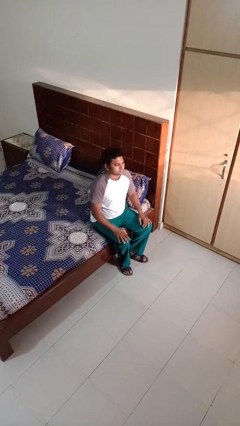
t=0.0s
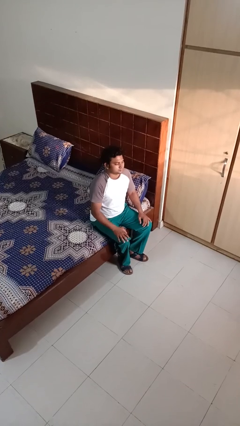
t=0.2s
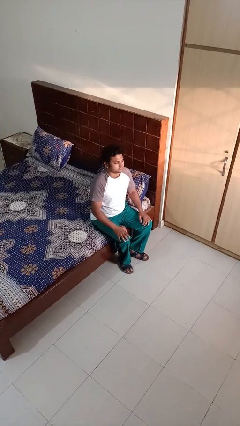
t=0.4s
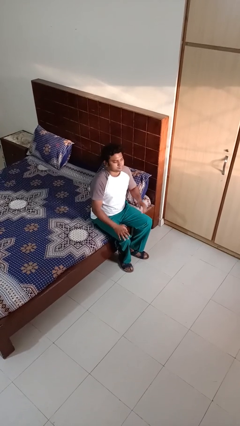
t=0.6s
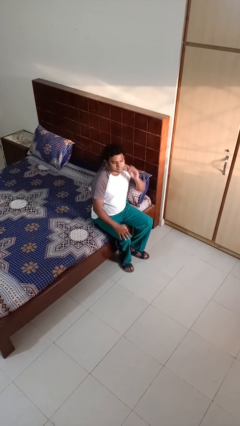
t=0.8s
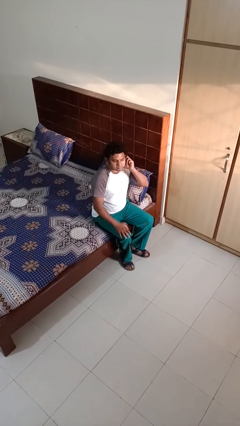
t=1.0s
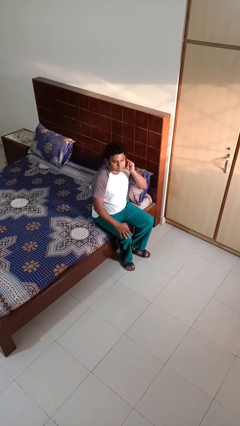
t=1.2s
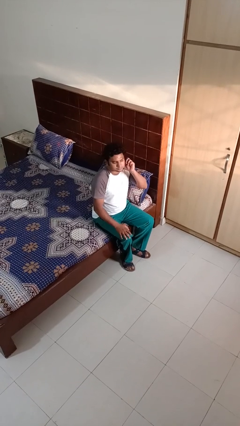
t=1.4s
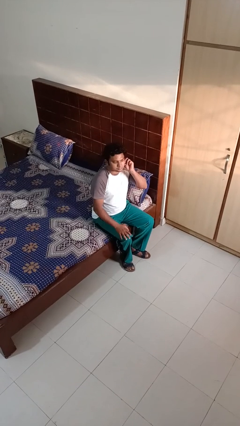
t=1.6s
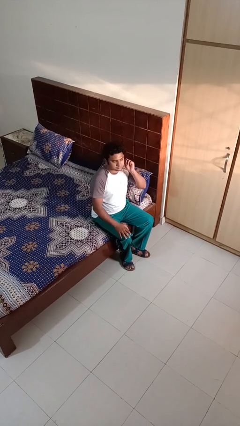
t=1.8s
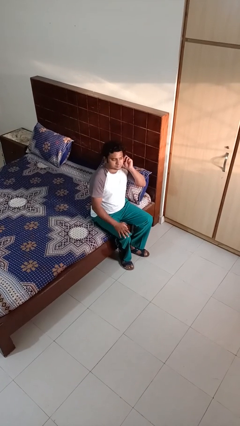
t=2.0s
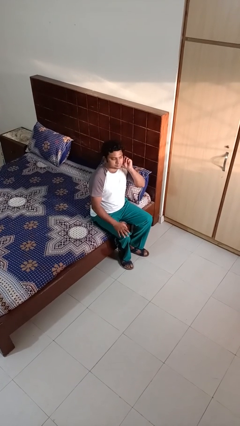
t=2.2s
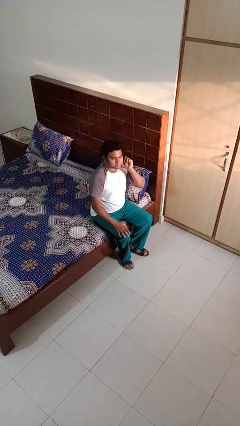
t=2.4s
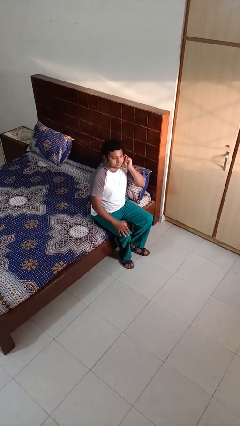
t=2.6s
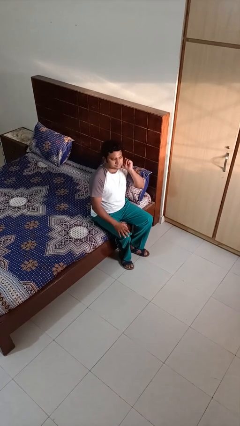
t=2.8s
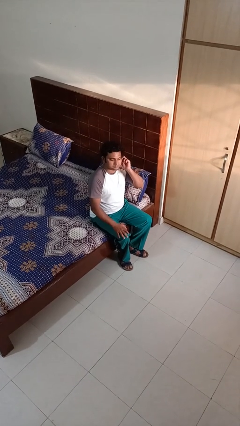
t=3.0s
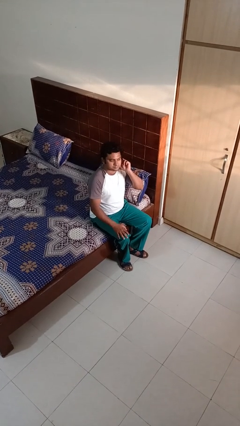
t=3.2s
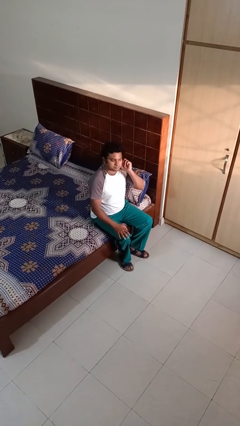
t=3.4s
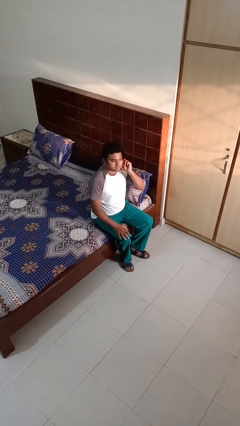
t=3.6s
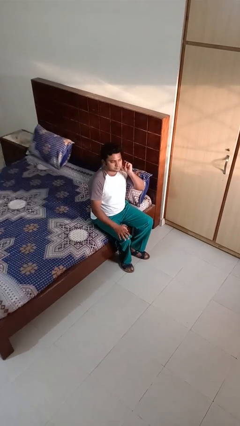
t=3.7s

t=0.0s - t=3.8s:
person touches earlobe

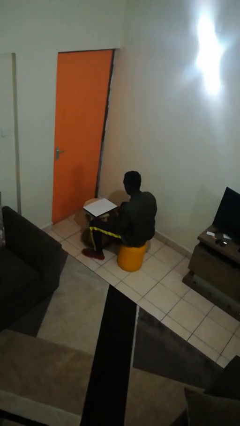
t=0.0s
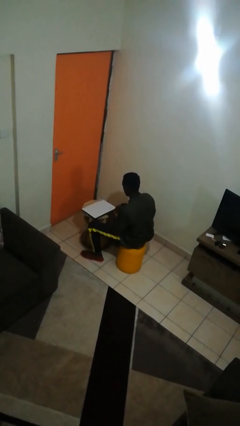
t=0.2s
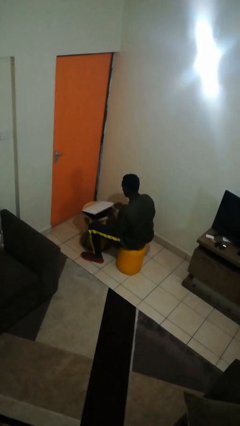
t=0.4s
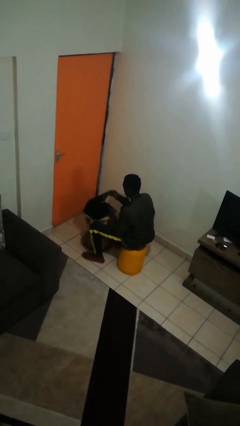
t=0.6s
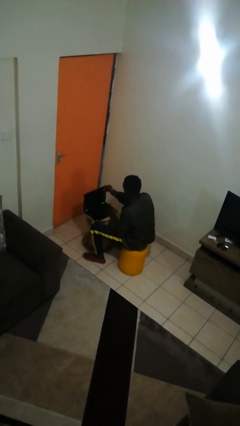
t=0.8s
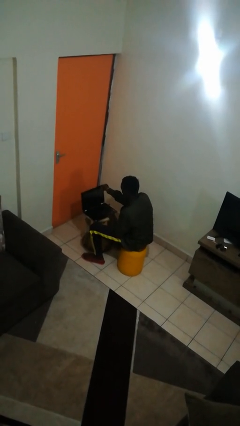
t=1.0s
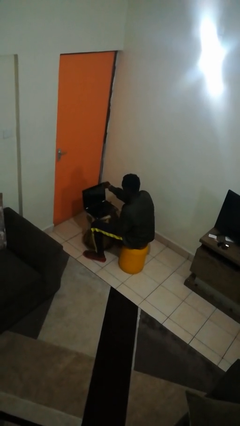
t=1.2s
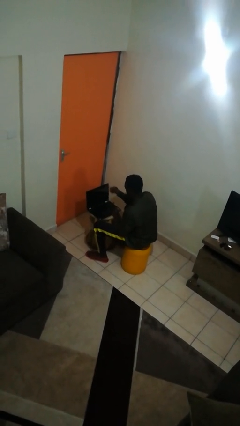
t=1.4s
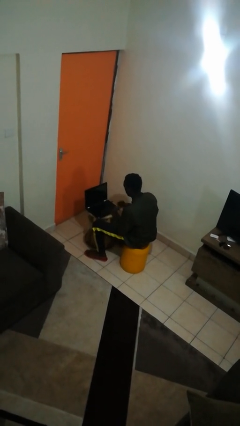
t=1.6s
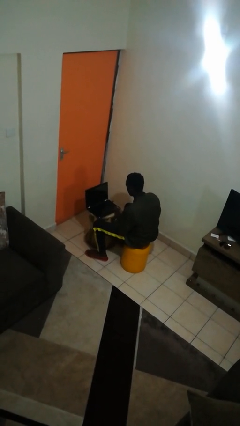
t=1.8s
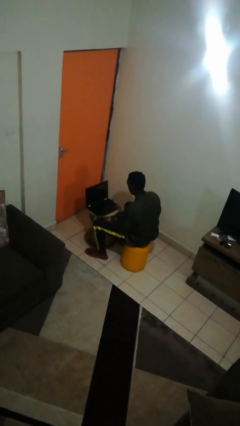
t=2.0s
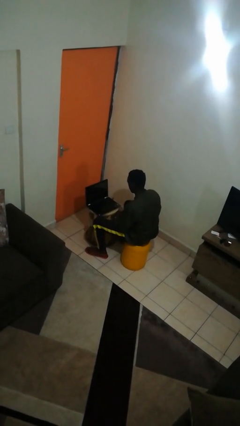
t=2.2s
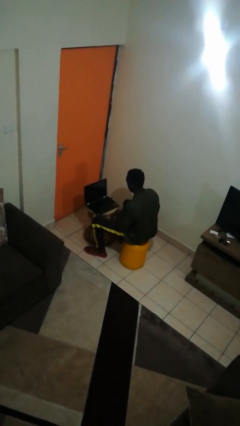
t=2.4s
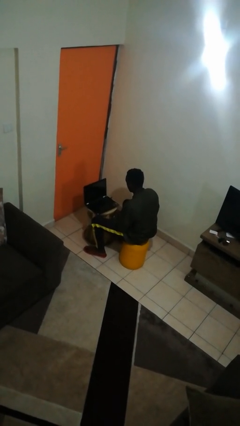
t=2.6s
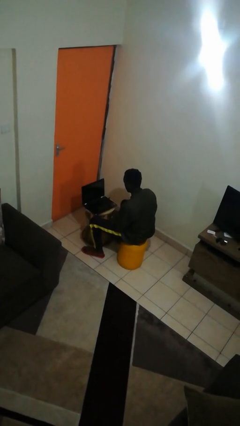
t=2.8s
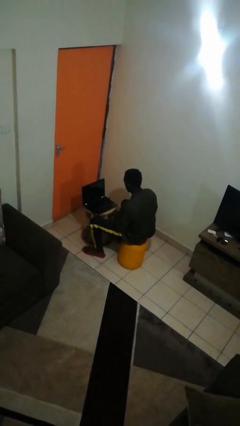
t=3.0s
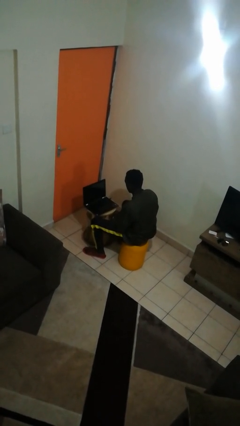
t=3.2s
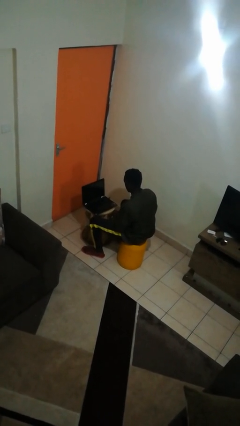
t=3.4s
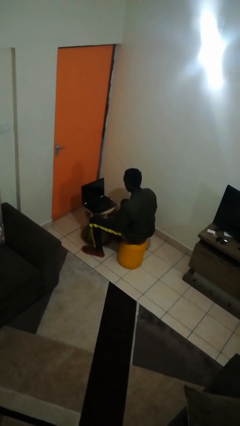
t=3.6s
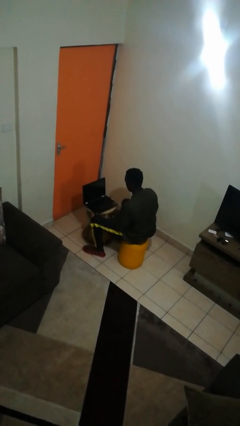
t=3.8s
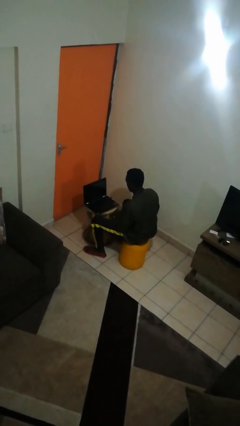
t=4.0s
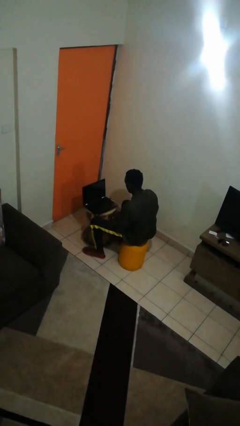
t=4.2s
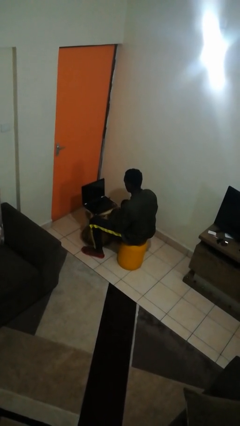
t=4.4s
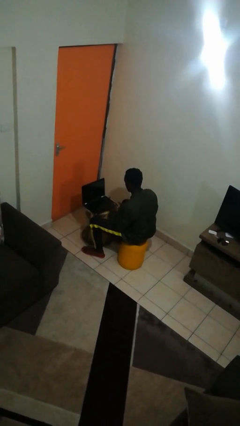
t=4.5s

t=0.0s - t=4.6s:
person opens laptop

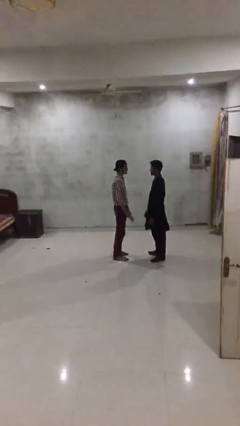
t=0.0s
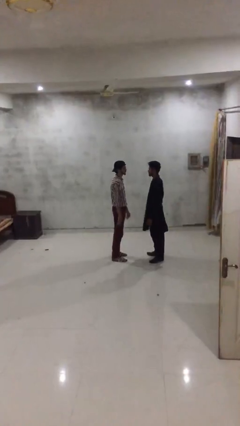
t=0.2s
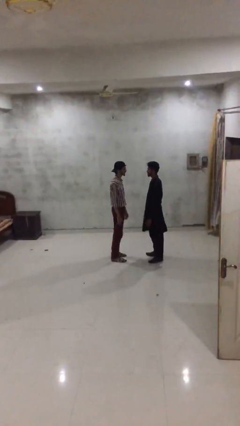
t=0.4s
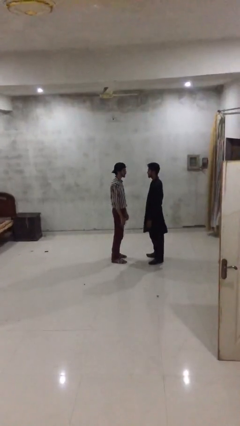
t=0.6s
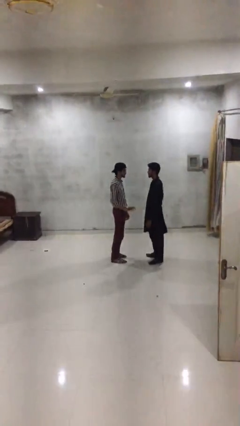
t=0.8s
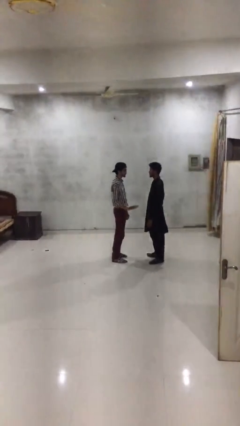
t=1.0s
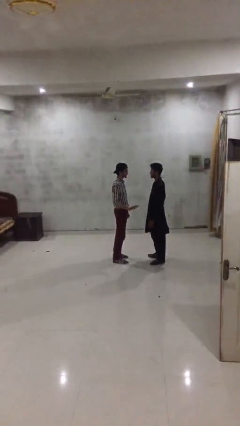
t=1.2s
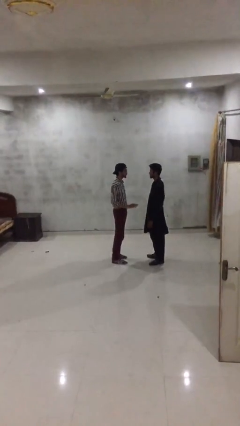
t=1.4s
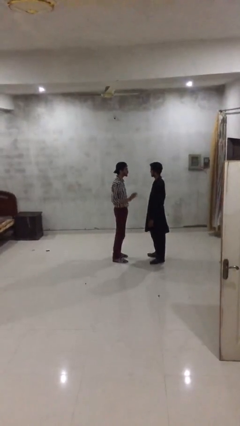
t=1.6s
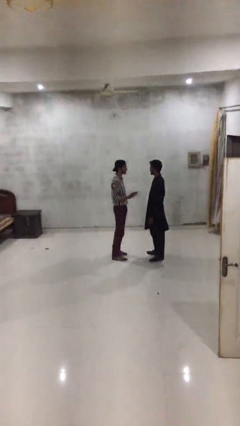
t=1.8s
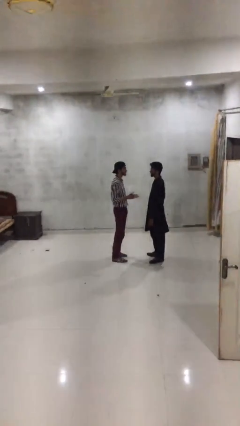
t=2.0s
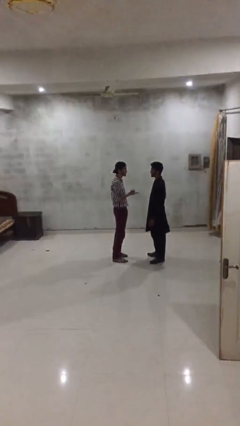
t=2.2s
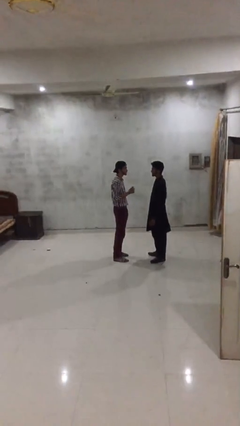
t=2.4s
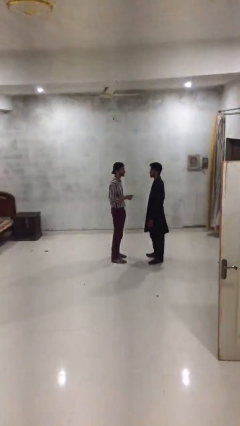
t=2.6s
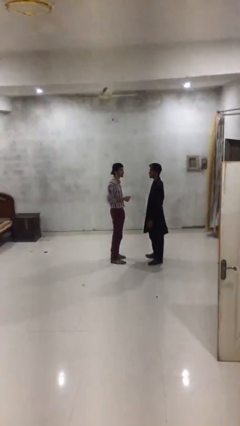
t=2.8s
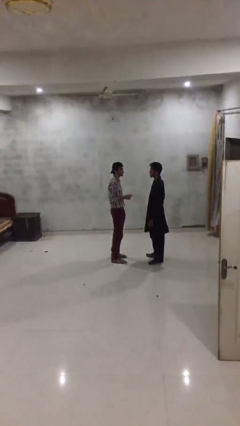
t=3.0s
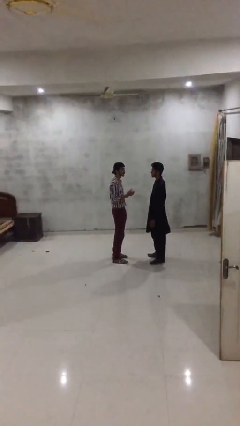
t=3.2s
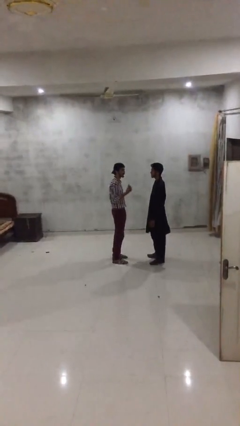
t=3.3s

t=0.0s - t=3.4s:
person talks to person

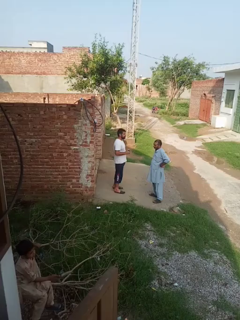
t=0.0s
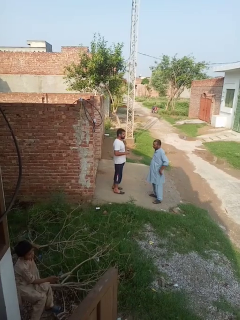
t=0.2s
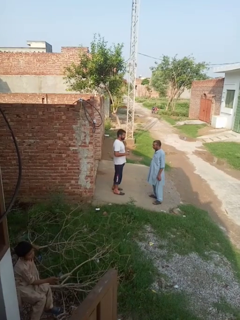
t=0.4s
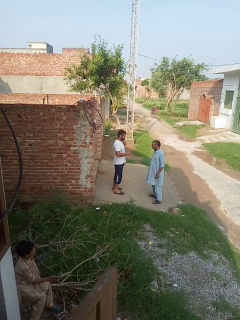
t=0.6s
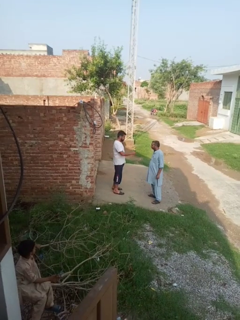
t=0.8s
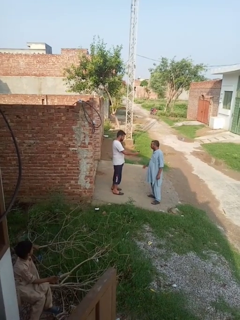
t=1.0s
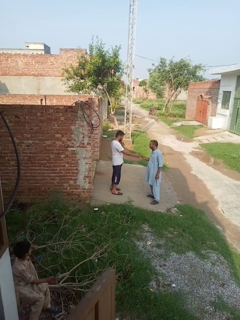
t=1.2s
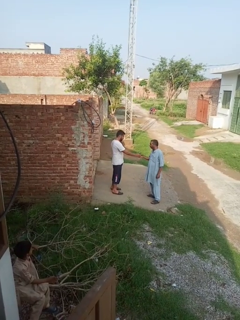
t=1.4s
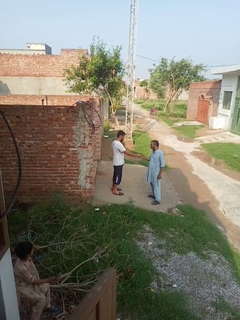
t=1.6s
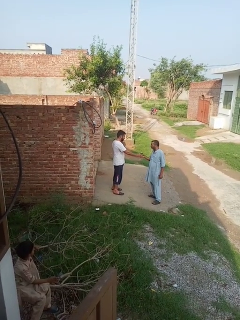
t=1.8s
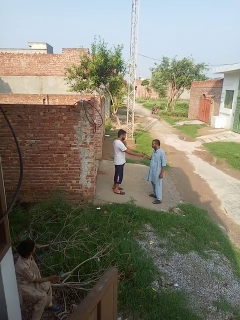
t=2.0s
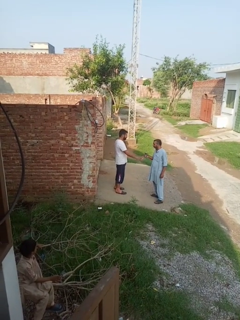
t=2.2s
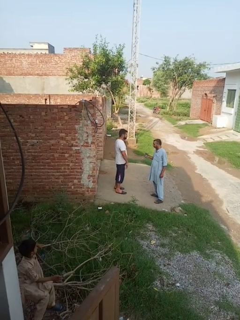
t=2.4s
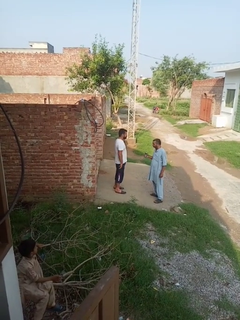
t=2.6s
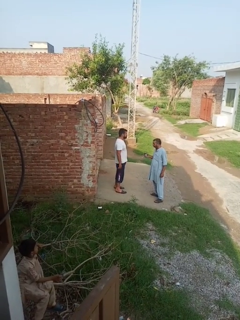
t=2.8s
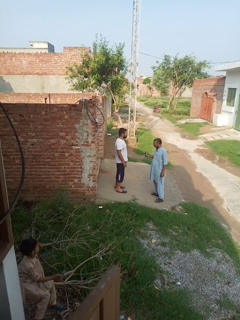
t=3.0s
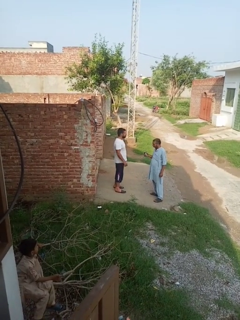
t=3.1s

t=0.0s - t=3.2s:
person transfers object to person

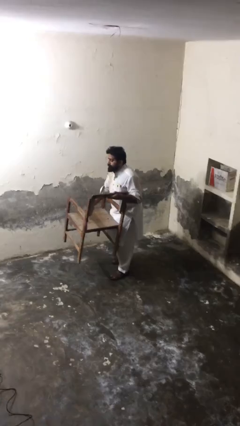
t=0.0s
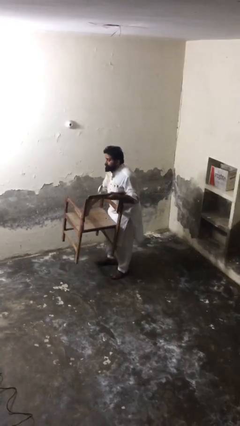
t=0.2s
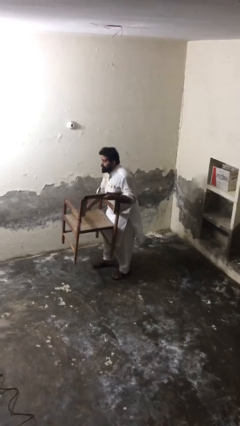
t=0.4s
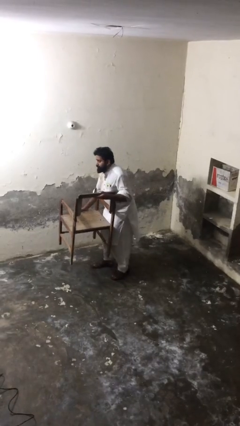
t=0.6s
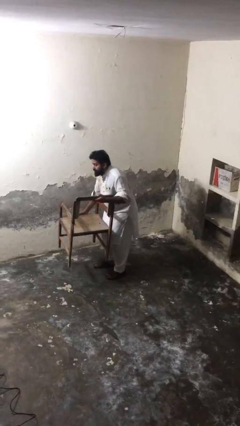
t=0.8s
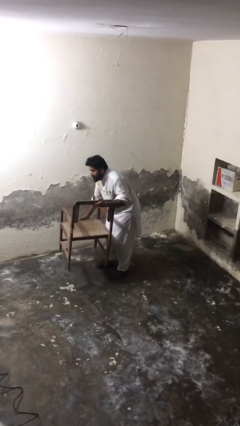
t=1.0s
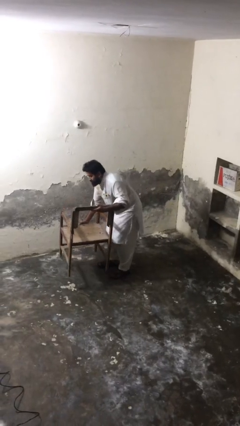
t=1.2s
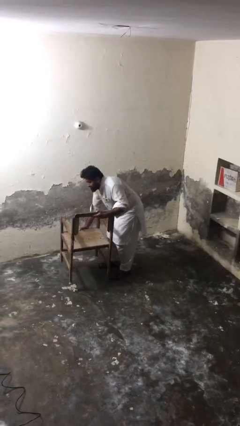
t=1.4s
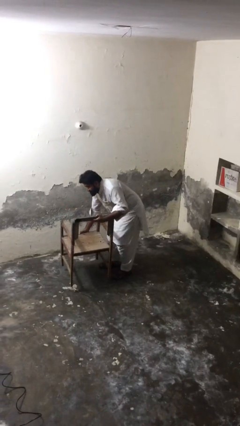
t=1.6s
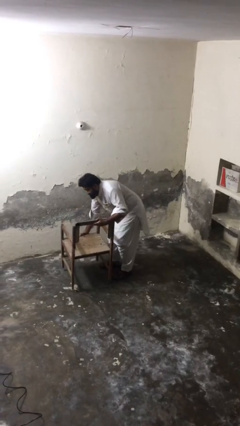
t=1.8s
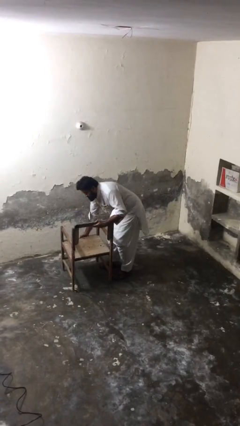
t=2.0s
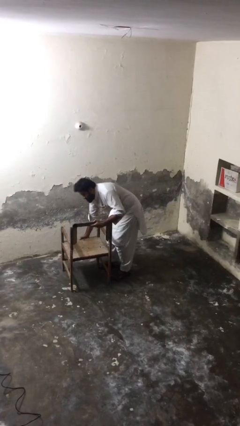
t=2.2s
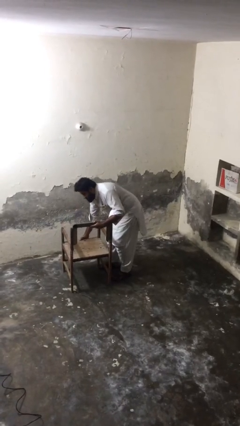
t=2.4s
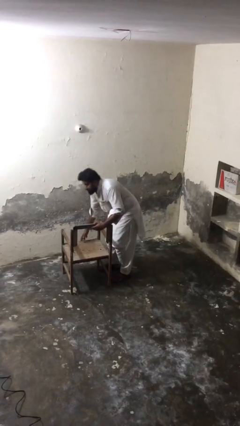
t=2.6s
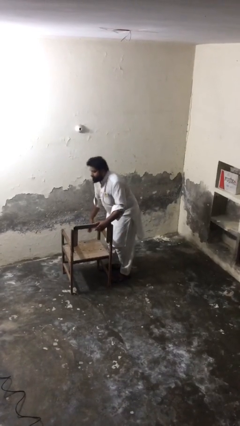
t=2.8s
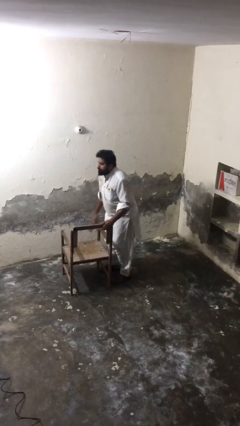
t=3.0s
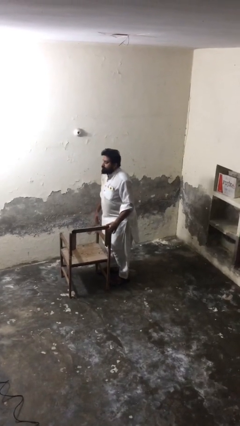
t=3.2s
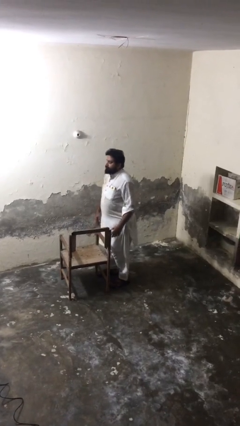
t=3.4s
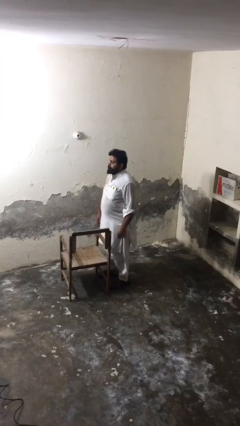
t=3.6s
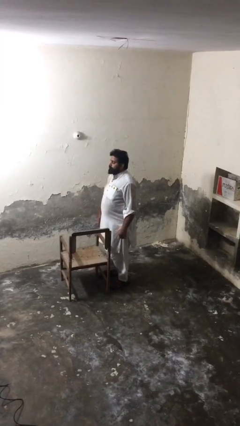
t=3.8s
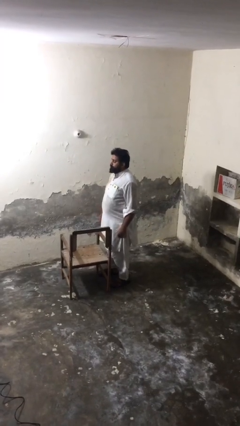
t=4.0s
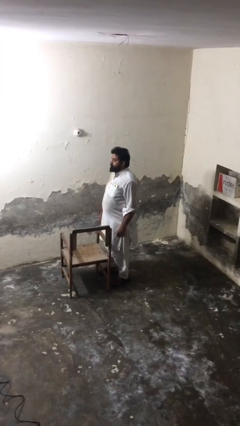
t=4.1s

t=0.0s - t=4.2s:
person puts down object on floor
